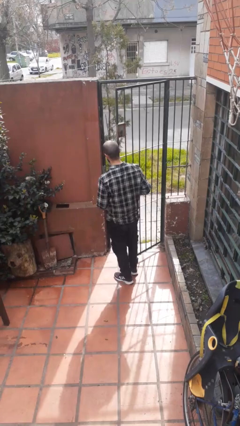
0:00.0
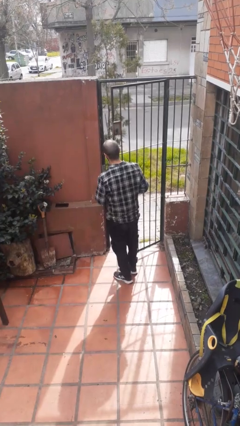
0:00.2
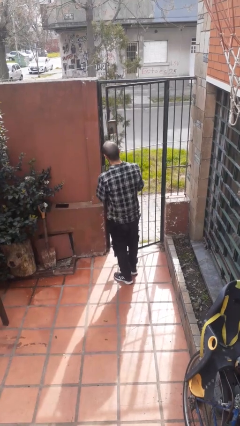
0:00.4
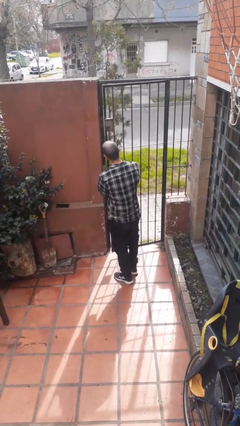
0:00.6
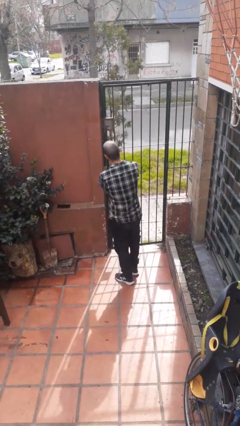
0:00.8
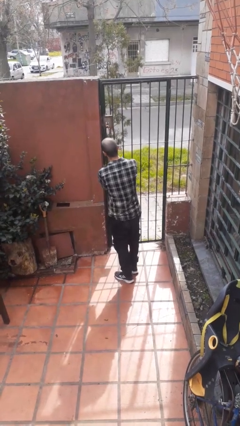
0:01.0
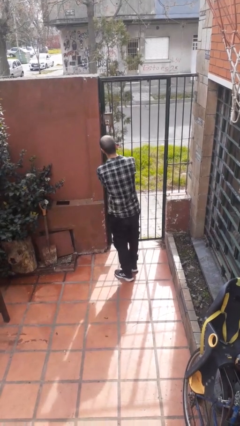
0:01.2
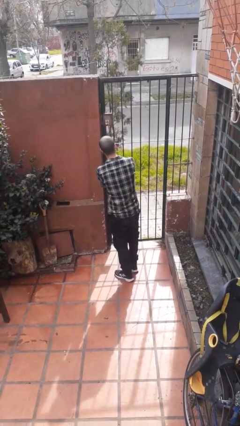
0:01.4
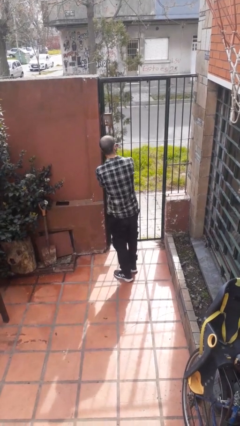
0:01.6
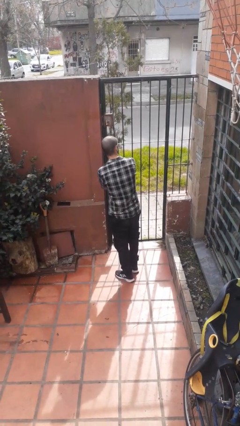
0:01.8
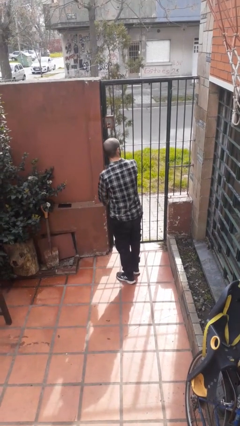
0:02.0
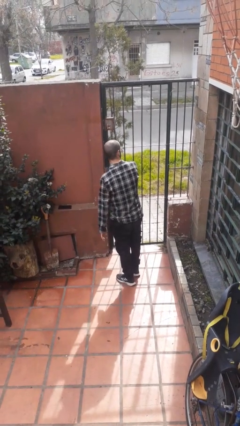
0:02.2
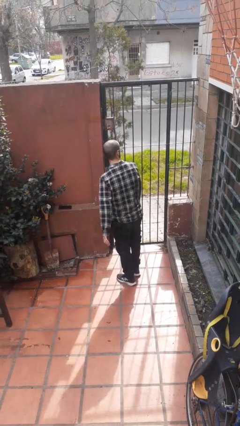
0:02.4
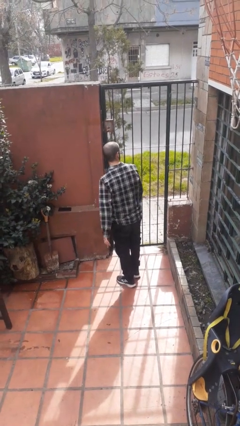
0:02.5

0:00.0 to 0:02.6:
person closes gate

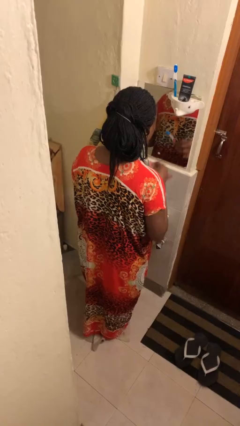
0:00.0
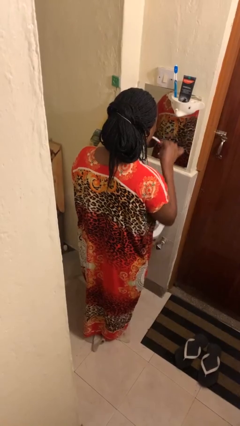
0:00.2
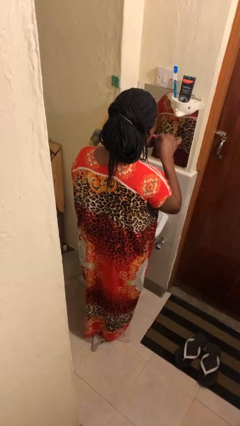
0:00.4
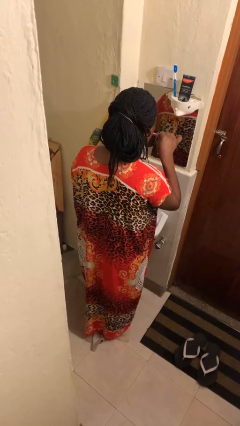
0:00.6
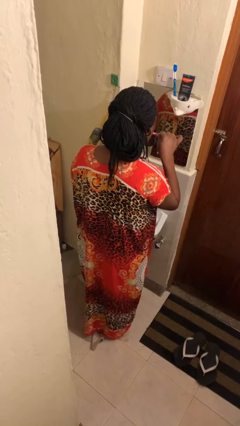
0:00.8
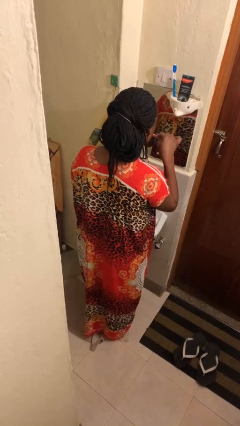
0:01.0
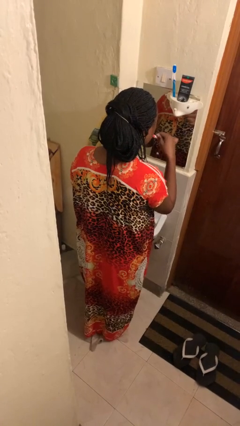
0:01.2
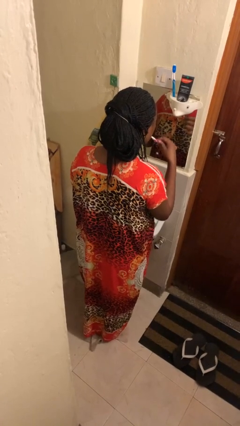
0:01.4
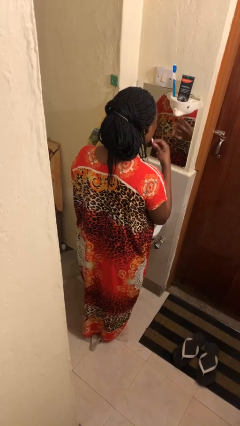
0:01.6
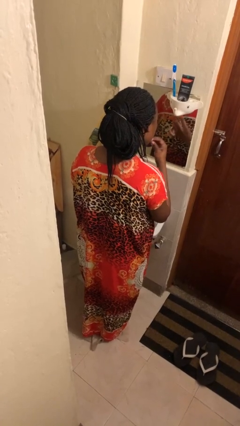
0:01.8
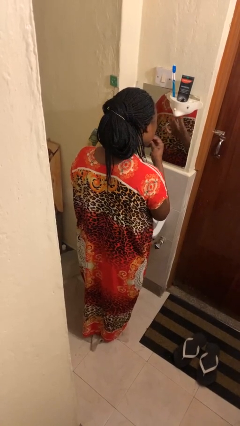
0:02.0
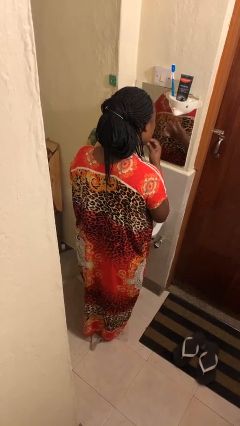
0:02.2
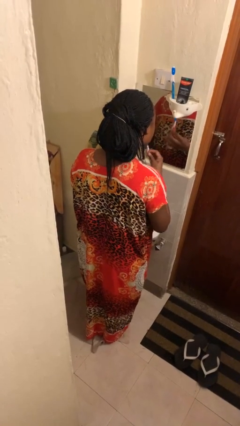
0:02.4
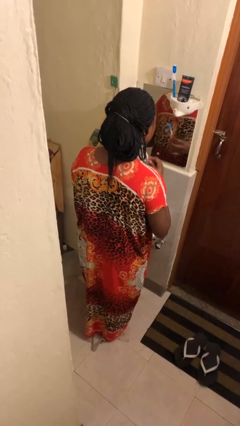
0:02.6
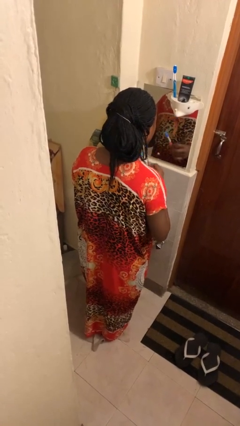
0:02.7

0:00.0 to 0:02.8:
person brushes teeth

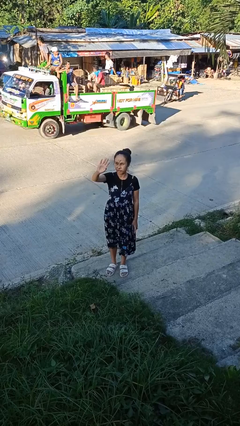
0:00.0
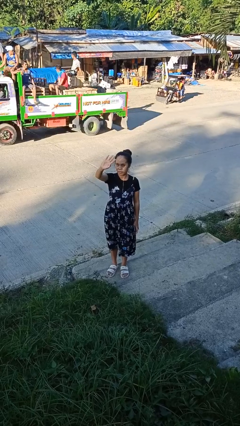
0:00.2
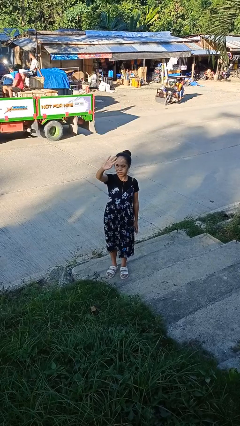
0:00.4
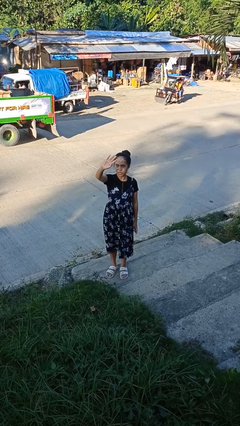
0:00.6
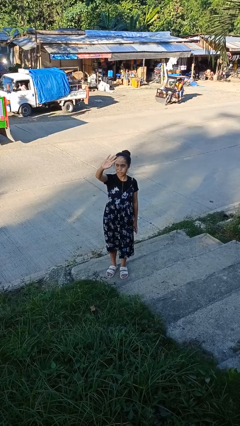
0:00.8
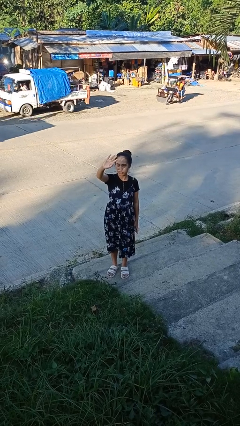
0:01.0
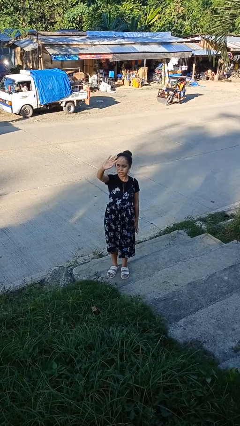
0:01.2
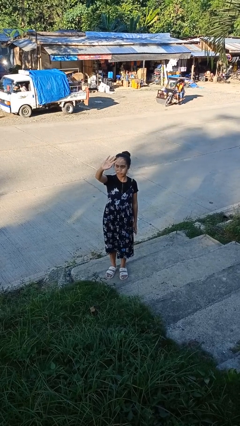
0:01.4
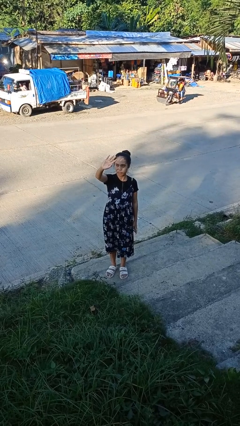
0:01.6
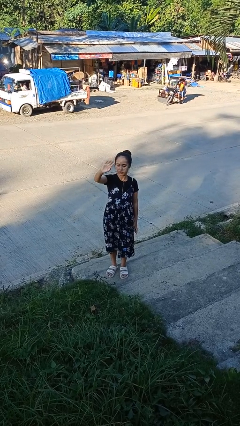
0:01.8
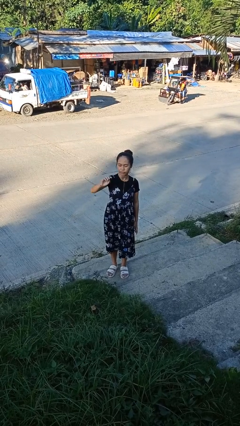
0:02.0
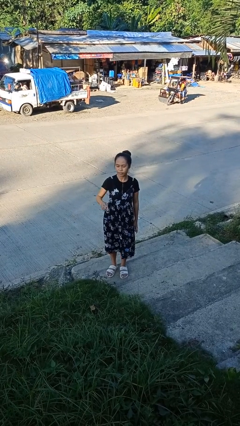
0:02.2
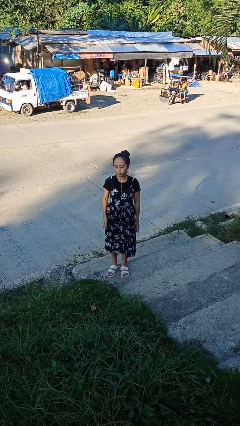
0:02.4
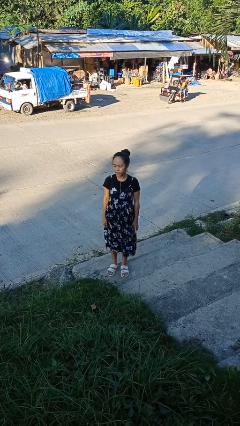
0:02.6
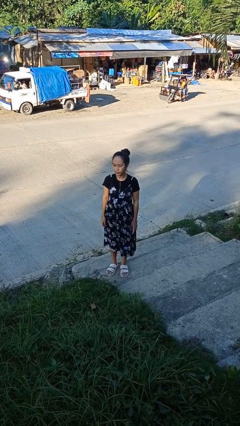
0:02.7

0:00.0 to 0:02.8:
person shades eyes

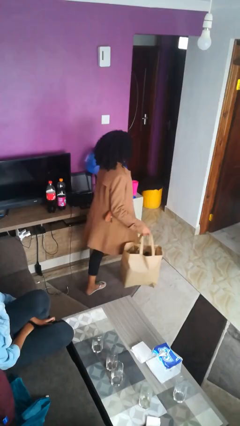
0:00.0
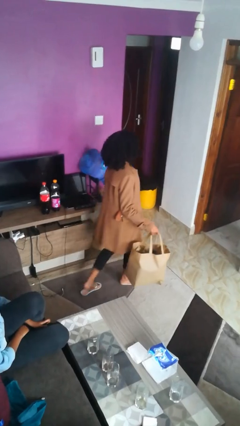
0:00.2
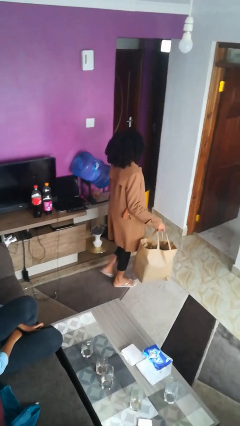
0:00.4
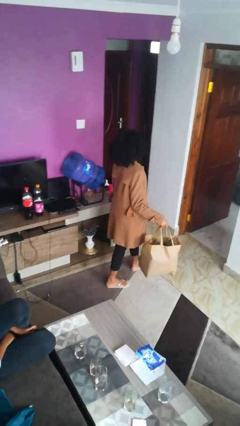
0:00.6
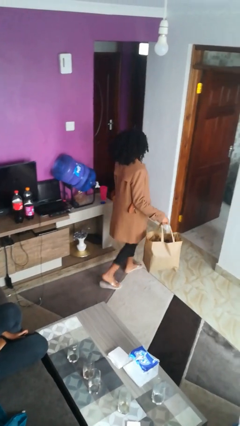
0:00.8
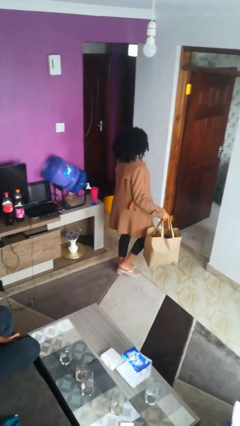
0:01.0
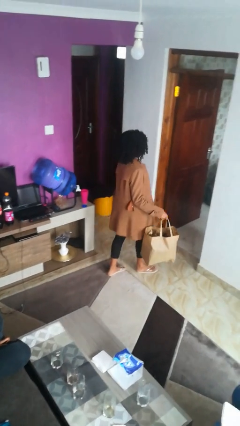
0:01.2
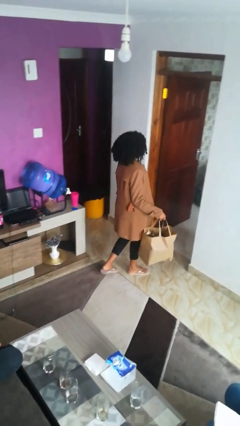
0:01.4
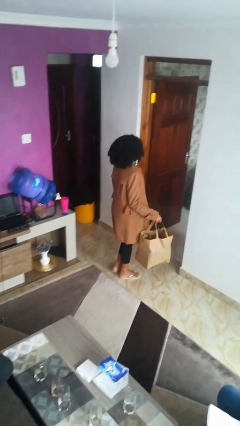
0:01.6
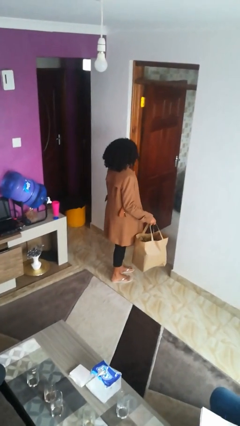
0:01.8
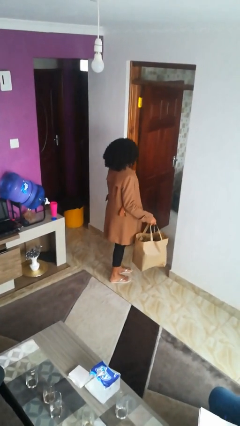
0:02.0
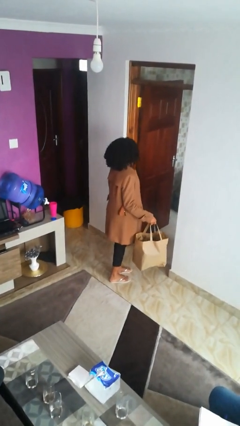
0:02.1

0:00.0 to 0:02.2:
person carries groceries

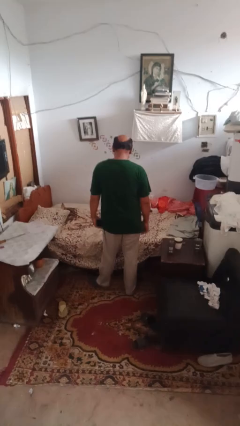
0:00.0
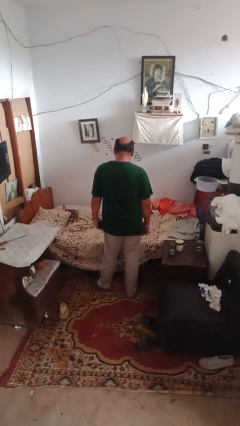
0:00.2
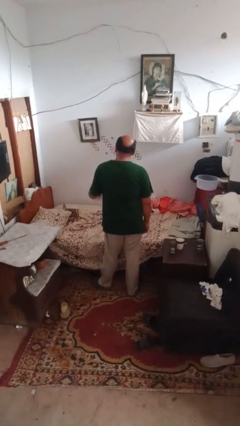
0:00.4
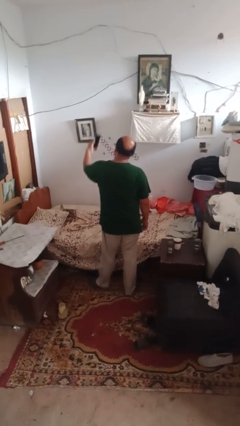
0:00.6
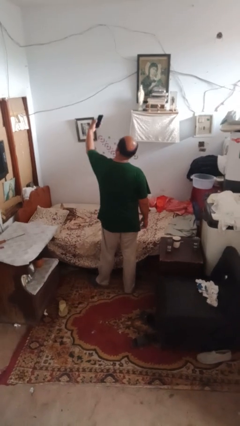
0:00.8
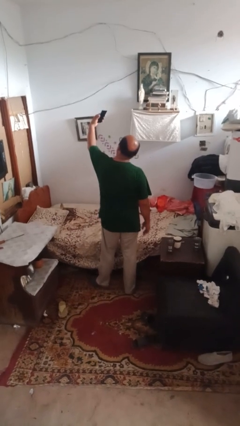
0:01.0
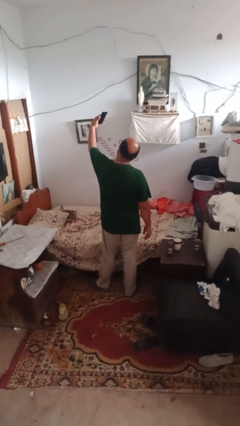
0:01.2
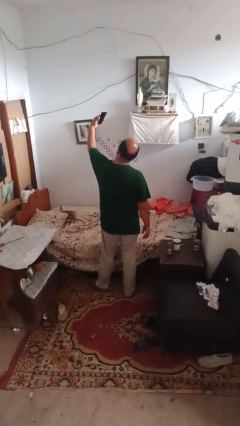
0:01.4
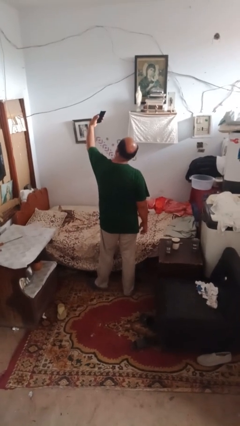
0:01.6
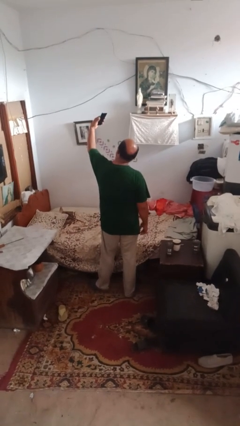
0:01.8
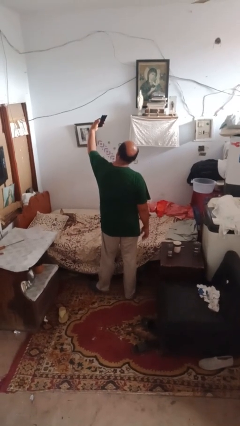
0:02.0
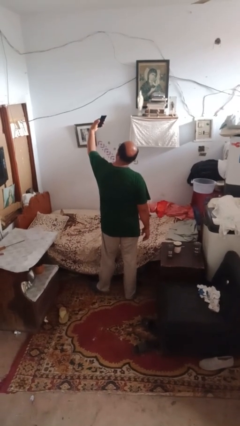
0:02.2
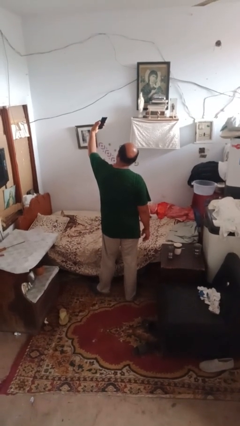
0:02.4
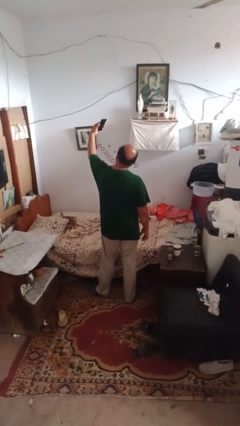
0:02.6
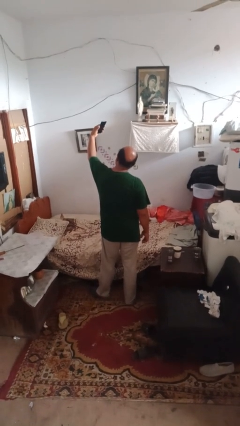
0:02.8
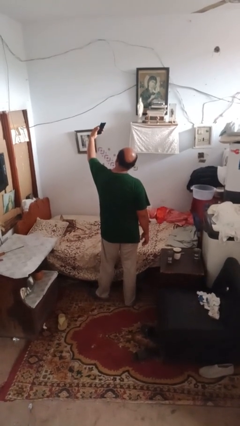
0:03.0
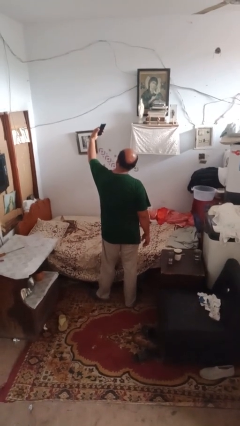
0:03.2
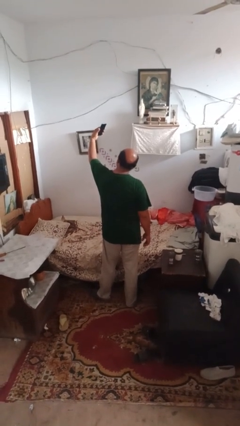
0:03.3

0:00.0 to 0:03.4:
person takes selfie

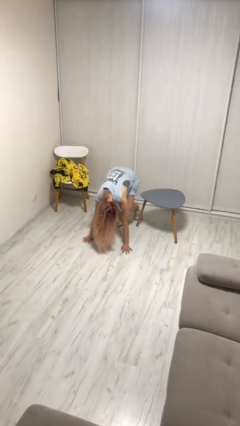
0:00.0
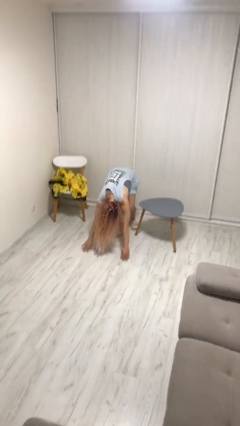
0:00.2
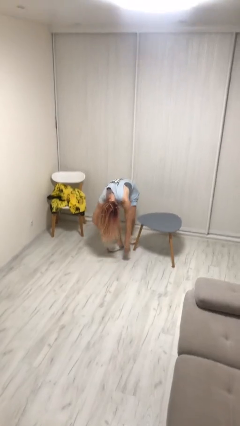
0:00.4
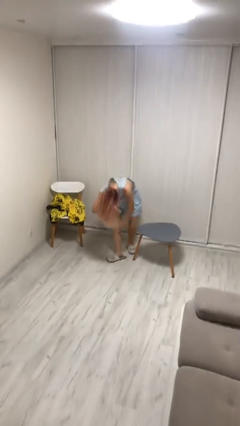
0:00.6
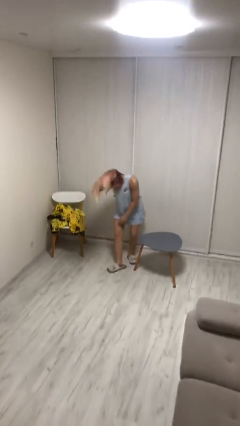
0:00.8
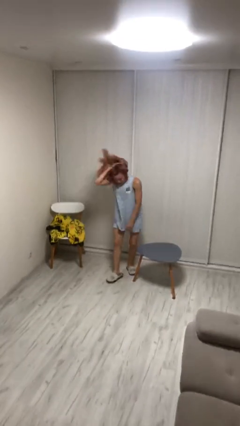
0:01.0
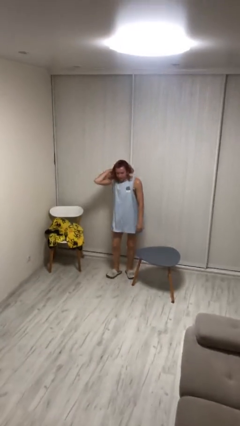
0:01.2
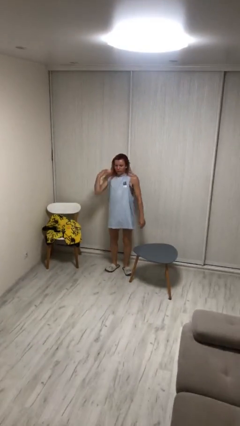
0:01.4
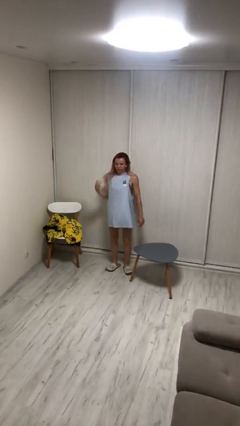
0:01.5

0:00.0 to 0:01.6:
person stands up from floor

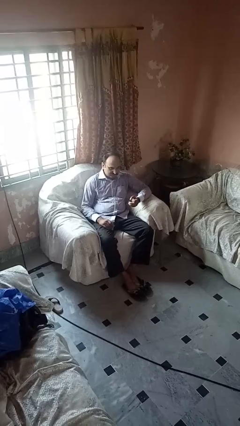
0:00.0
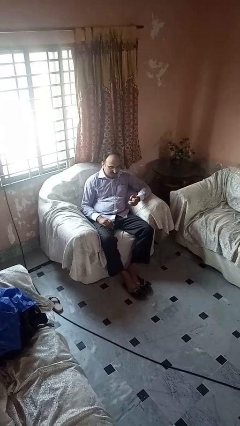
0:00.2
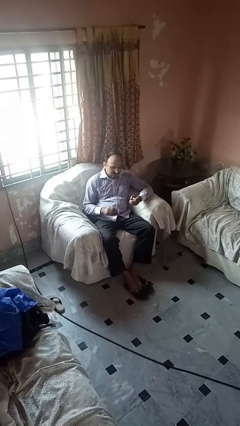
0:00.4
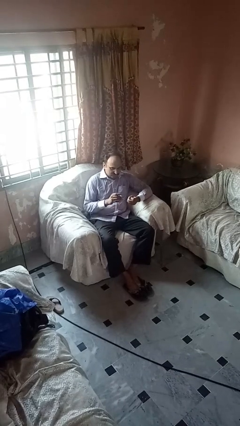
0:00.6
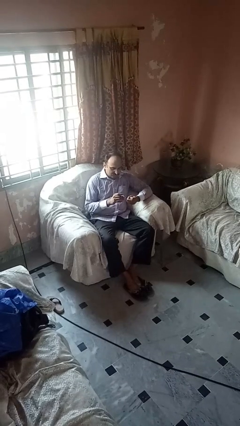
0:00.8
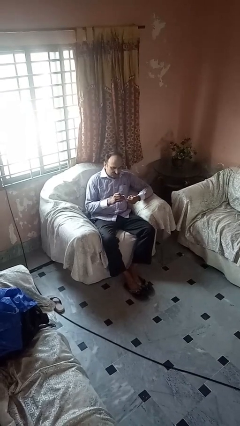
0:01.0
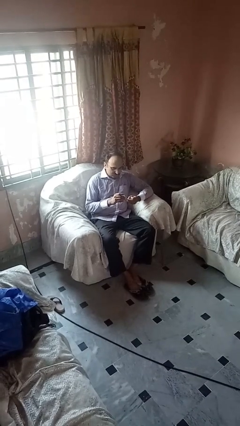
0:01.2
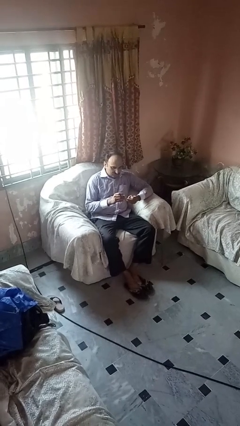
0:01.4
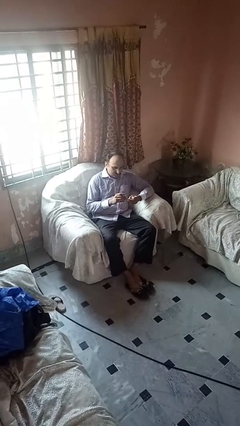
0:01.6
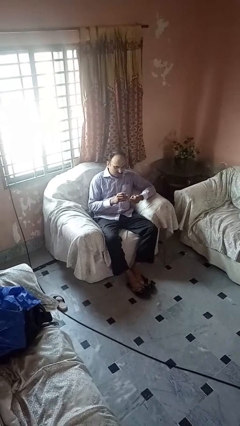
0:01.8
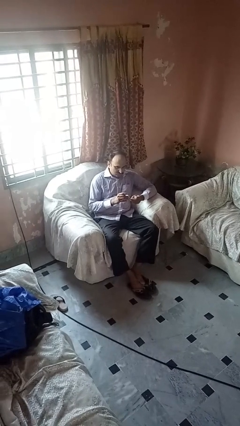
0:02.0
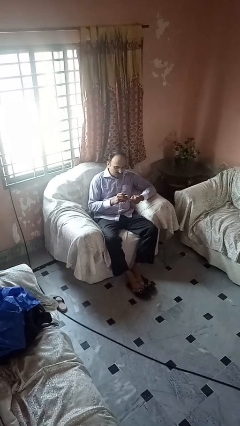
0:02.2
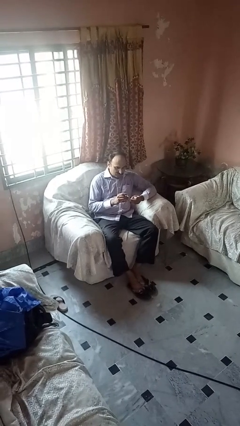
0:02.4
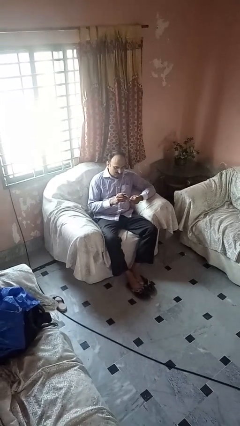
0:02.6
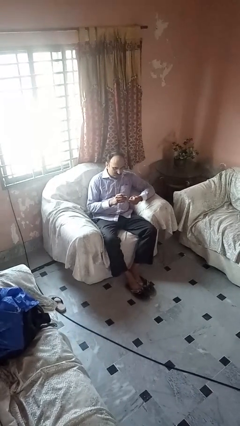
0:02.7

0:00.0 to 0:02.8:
person clips fingernails
